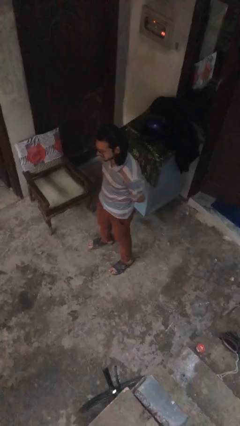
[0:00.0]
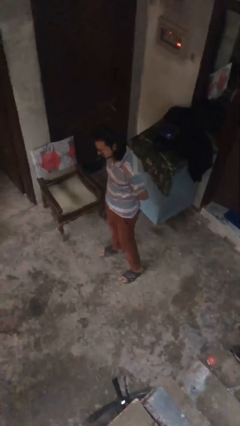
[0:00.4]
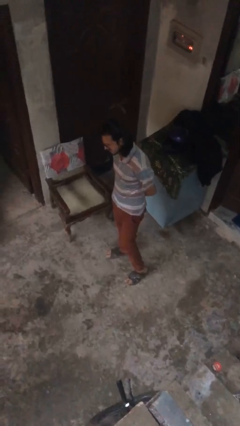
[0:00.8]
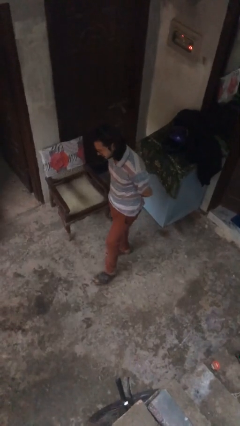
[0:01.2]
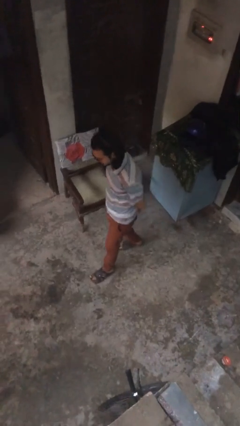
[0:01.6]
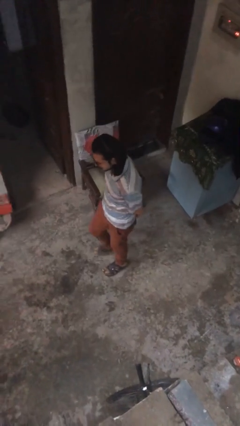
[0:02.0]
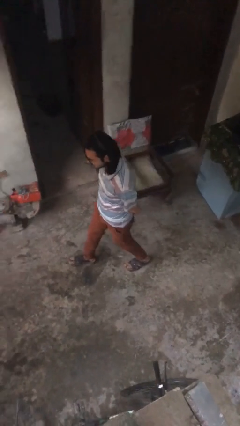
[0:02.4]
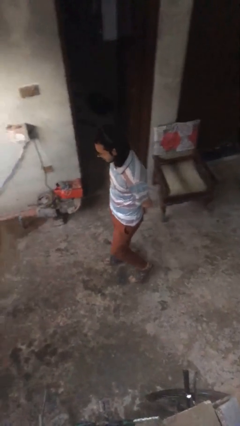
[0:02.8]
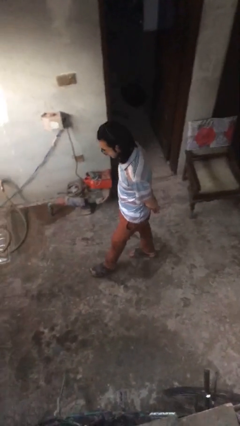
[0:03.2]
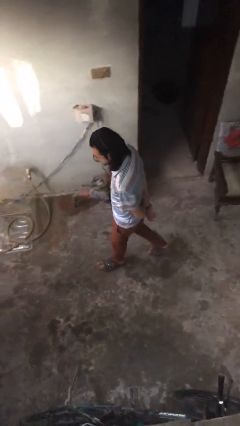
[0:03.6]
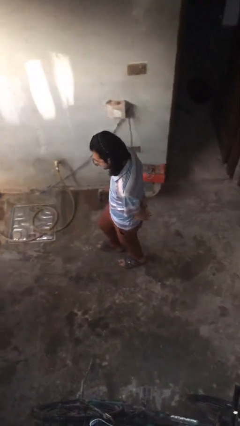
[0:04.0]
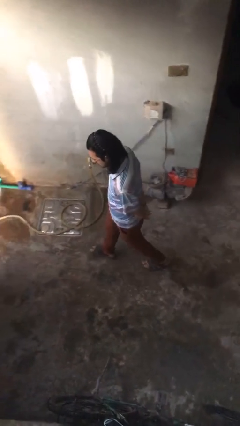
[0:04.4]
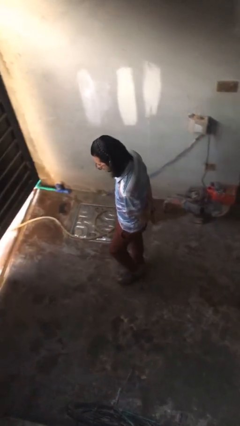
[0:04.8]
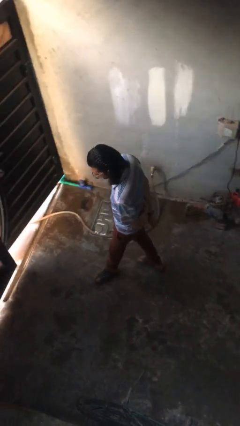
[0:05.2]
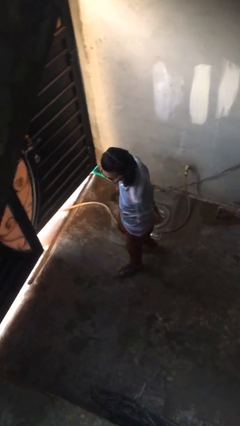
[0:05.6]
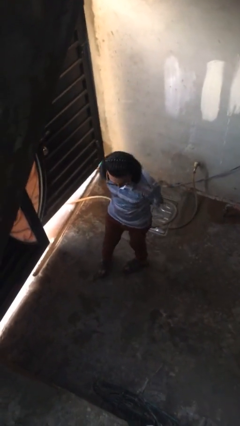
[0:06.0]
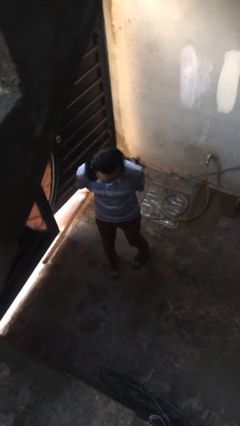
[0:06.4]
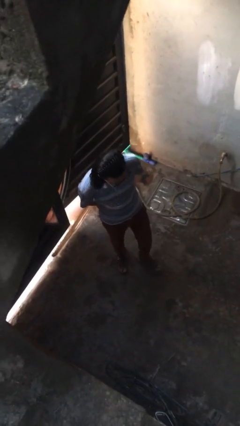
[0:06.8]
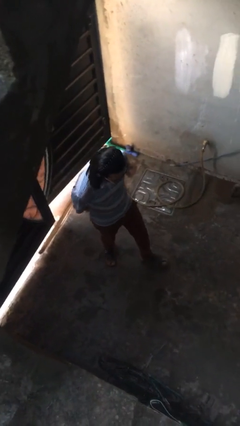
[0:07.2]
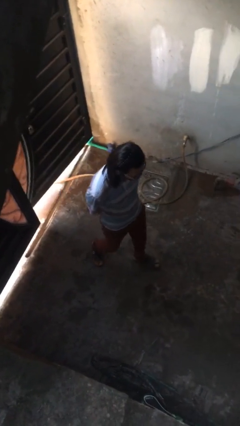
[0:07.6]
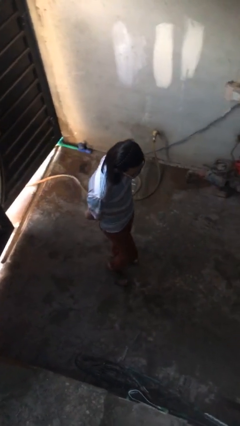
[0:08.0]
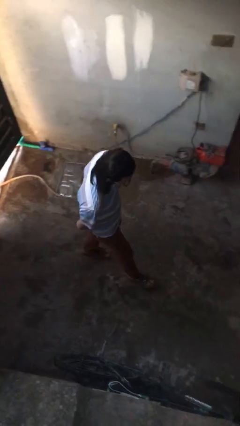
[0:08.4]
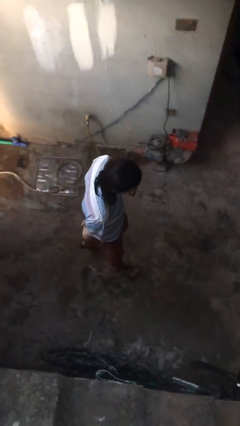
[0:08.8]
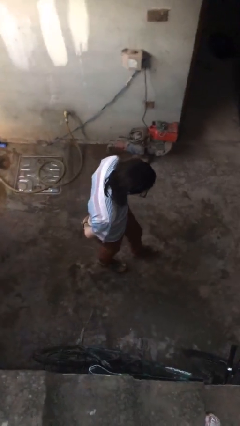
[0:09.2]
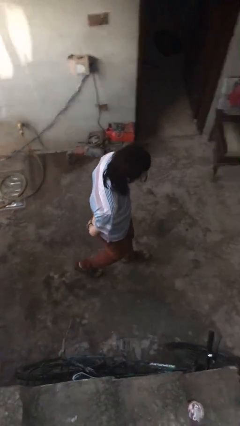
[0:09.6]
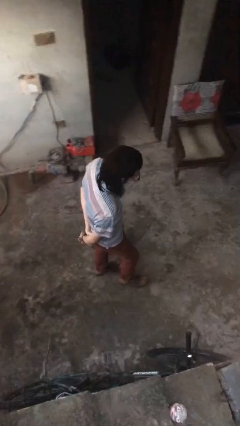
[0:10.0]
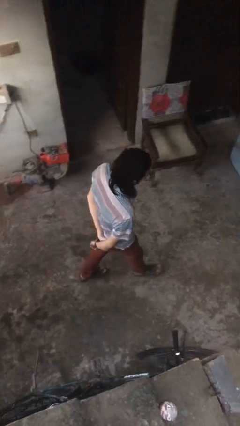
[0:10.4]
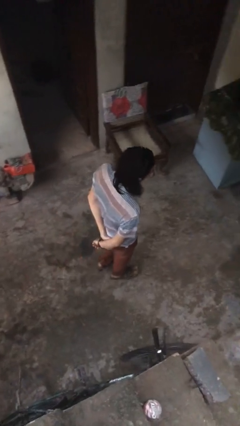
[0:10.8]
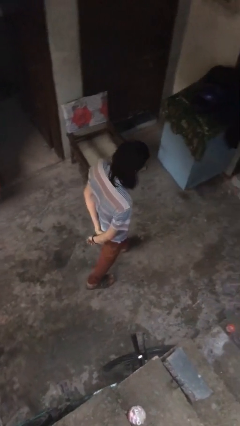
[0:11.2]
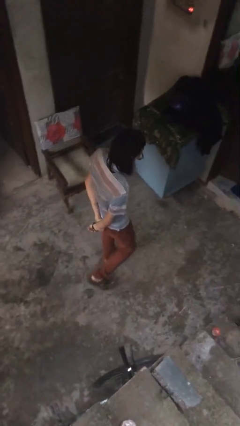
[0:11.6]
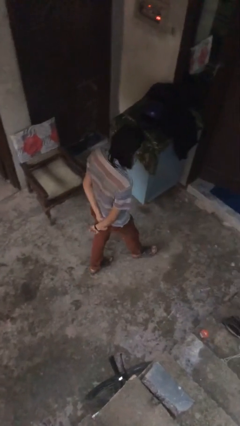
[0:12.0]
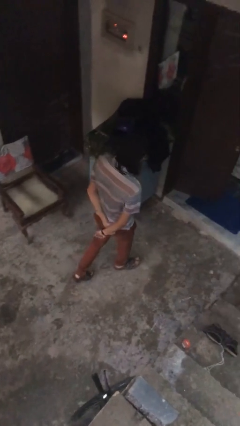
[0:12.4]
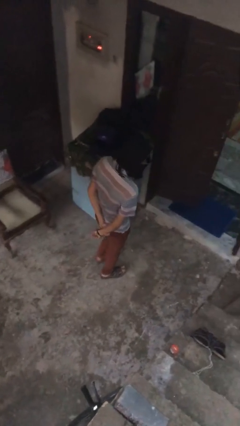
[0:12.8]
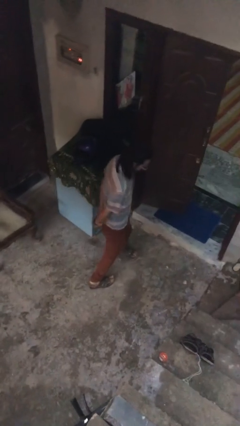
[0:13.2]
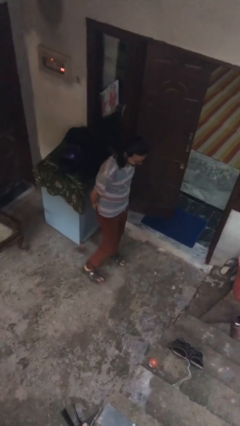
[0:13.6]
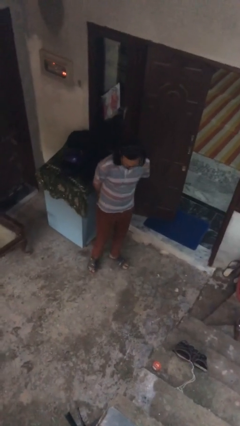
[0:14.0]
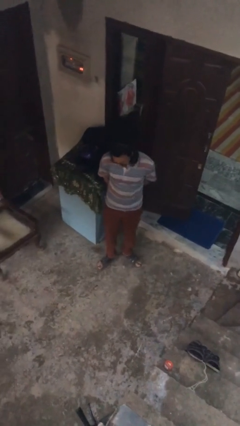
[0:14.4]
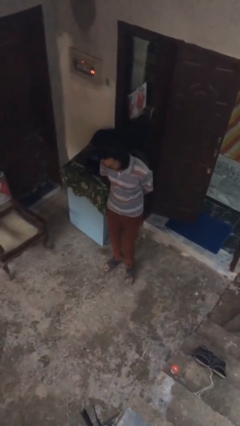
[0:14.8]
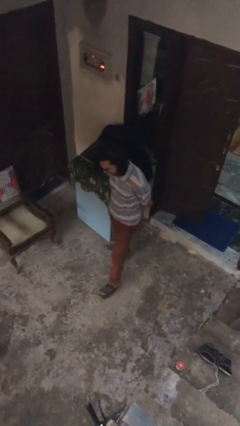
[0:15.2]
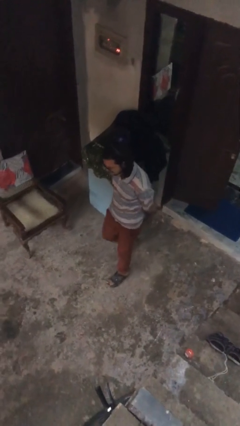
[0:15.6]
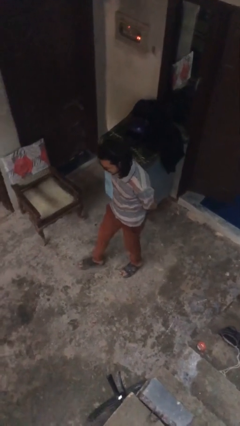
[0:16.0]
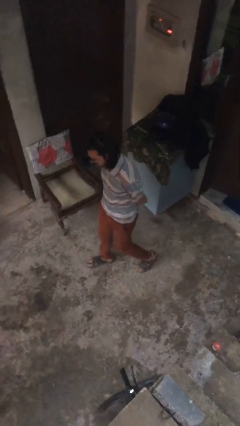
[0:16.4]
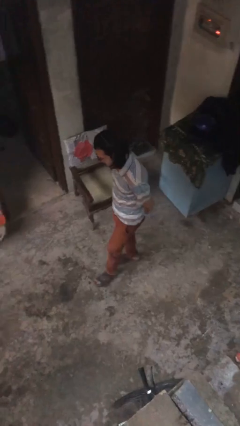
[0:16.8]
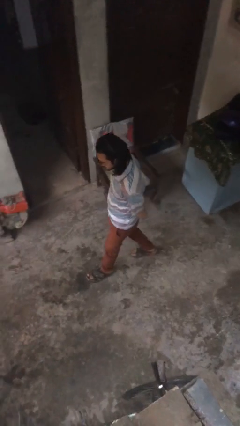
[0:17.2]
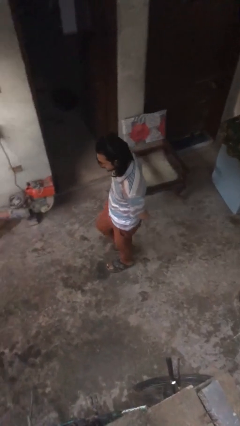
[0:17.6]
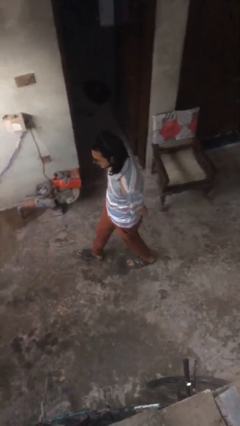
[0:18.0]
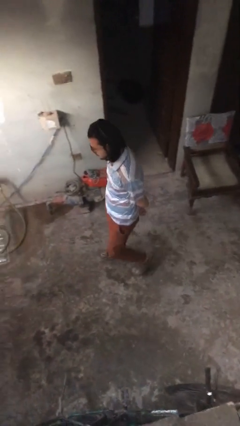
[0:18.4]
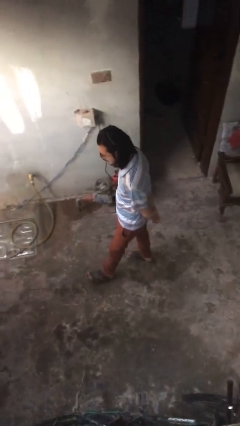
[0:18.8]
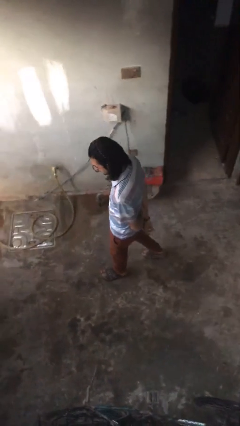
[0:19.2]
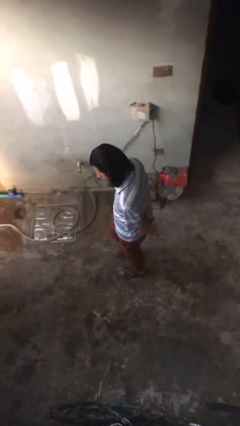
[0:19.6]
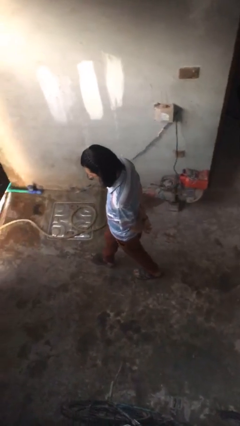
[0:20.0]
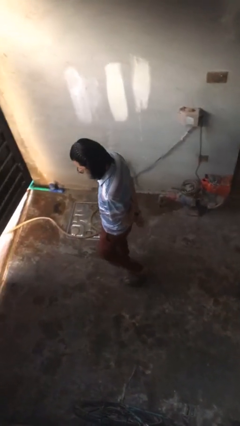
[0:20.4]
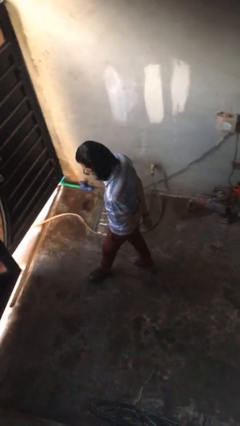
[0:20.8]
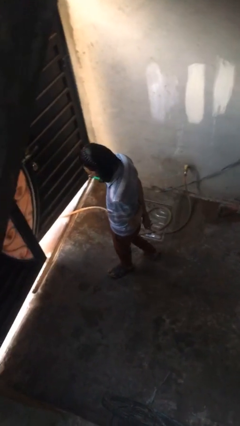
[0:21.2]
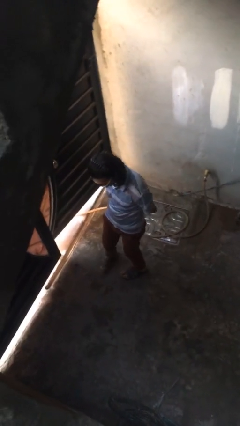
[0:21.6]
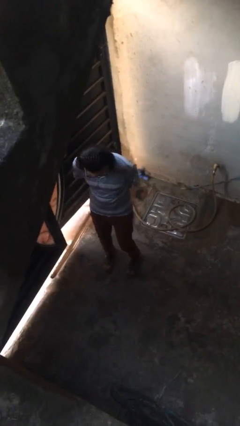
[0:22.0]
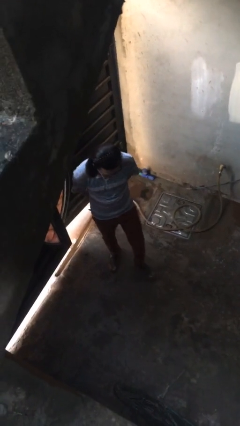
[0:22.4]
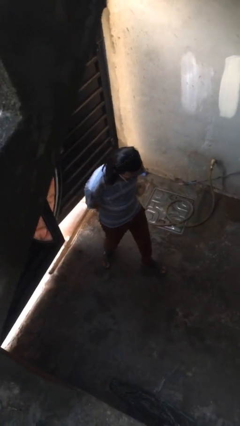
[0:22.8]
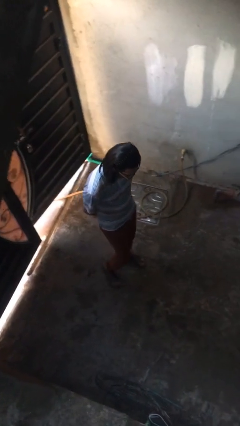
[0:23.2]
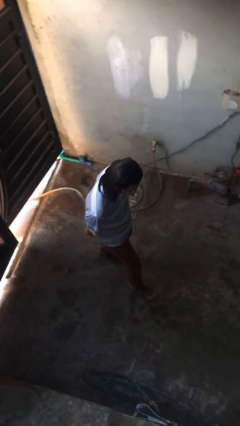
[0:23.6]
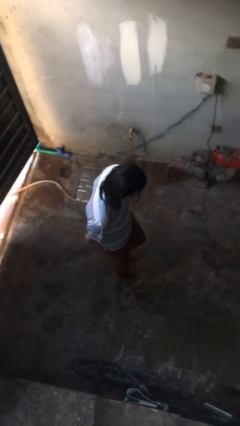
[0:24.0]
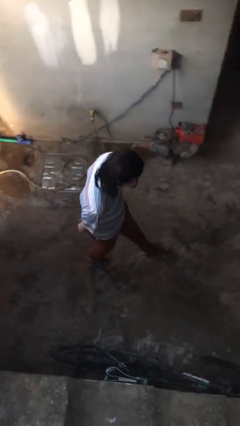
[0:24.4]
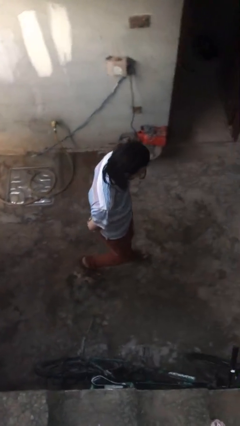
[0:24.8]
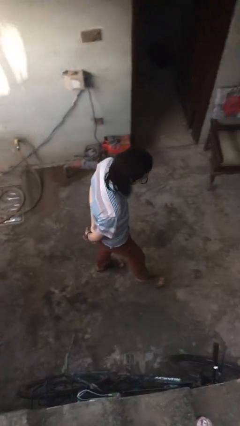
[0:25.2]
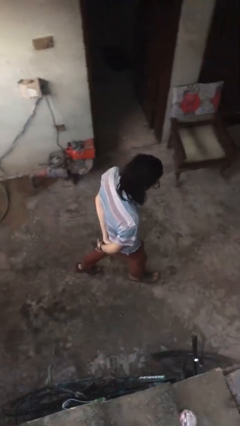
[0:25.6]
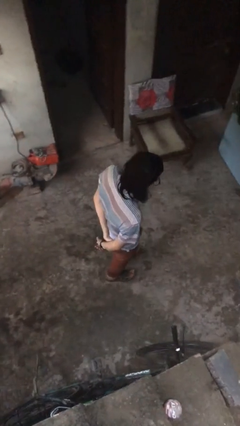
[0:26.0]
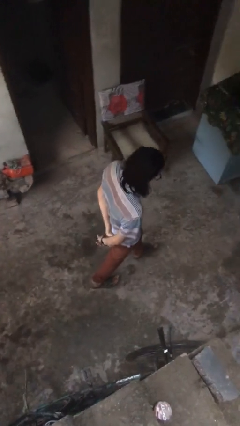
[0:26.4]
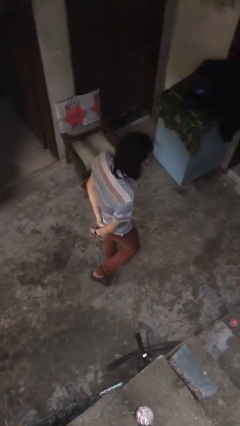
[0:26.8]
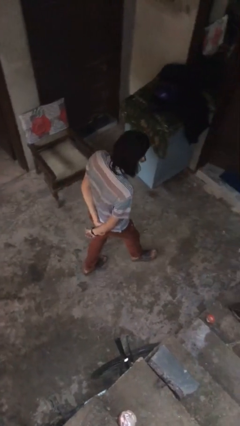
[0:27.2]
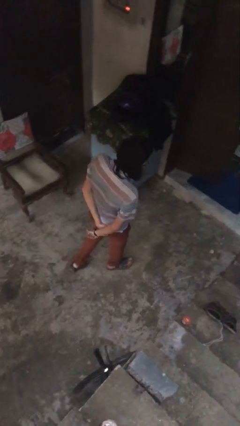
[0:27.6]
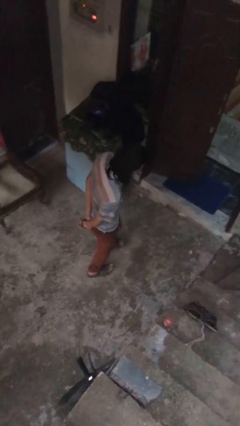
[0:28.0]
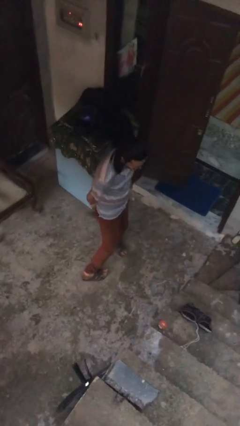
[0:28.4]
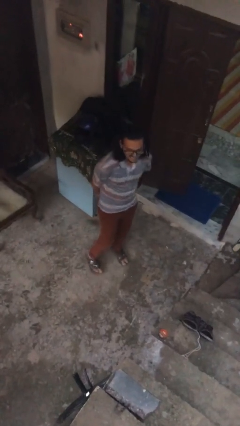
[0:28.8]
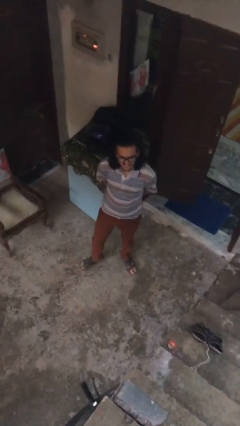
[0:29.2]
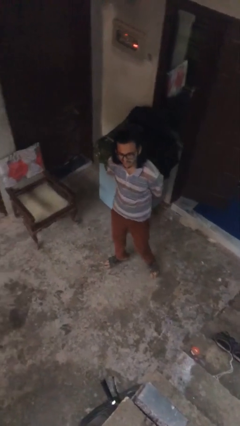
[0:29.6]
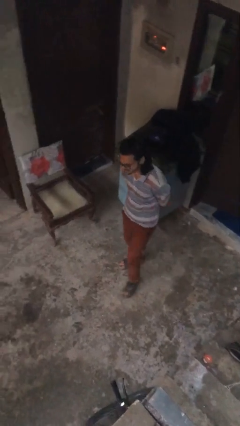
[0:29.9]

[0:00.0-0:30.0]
person walks

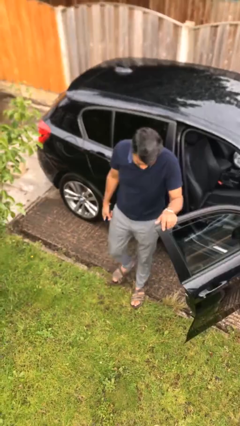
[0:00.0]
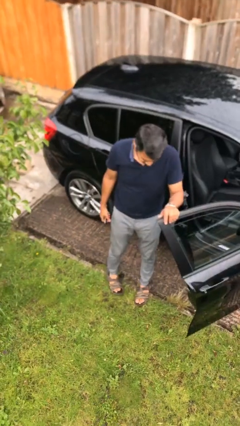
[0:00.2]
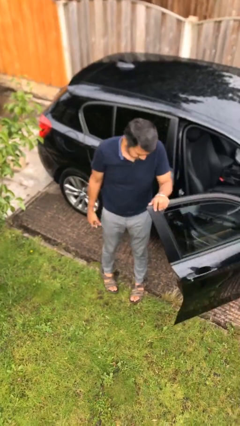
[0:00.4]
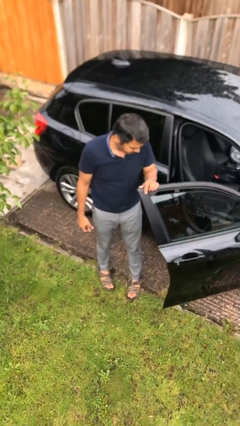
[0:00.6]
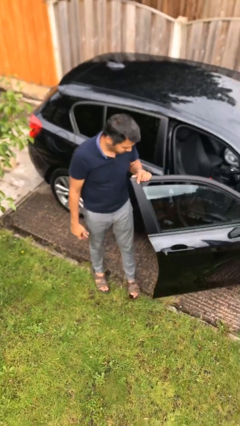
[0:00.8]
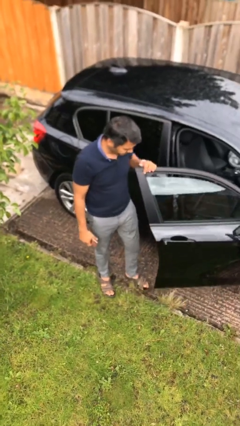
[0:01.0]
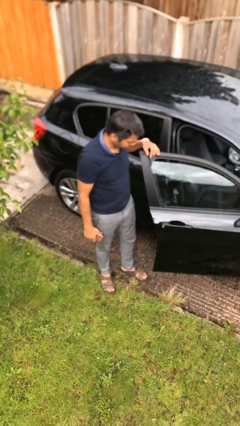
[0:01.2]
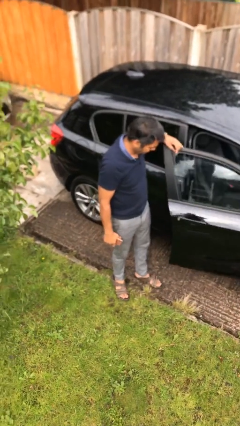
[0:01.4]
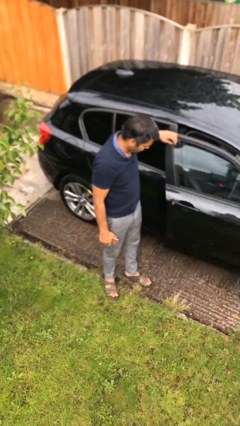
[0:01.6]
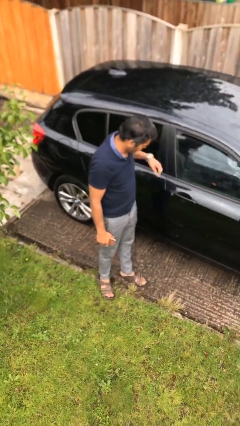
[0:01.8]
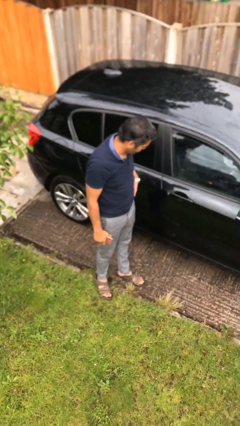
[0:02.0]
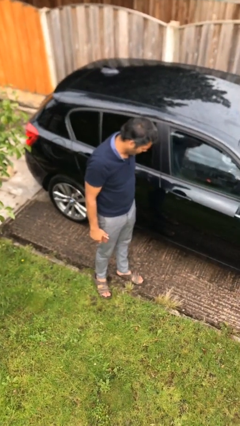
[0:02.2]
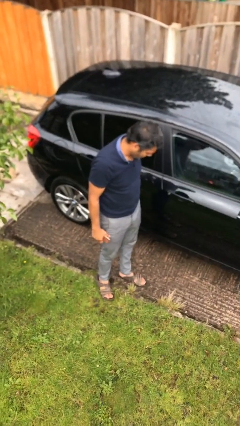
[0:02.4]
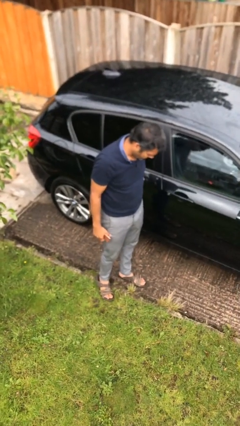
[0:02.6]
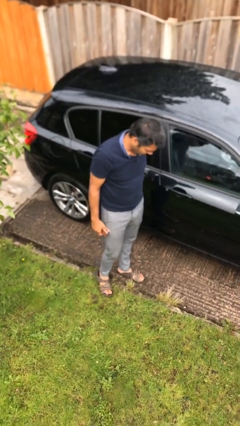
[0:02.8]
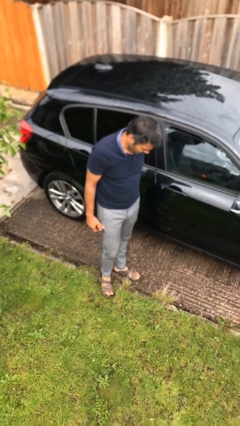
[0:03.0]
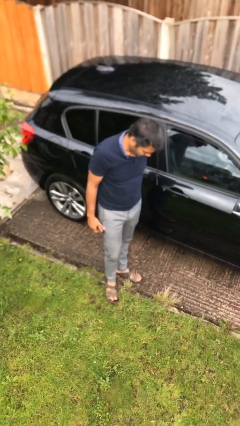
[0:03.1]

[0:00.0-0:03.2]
person closes car door
